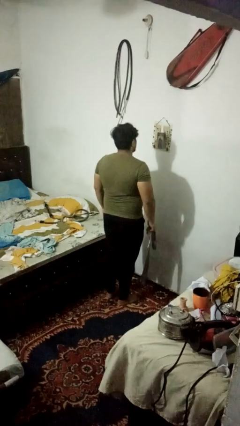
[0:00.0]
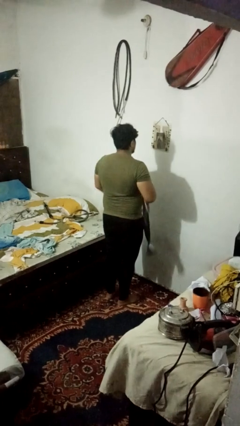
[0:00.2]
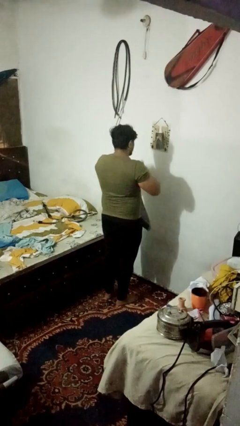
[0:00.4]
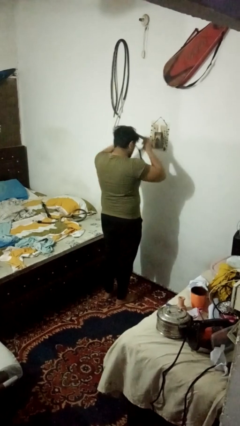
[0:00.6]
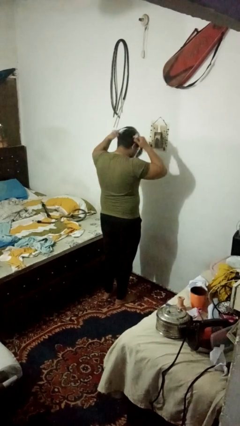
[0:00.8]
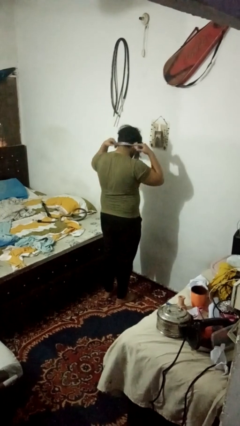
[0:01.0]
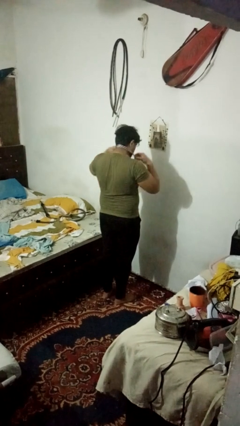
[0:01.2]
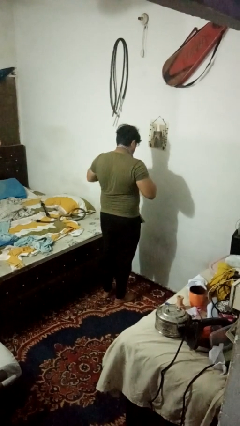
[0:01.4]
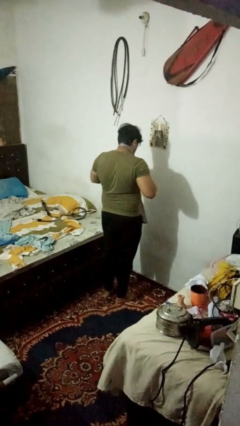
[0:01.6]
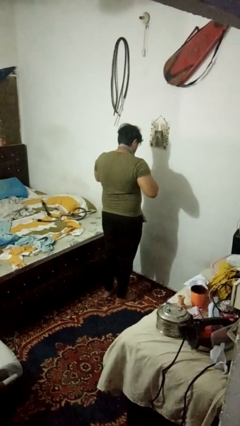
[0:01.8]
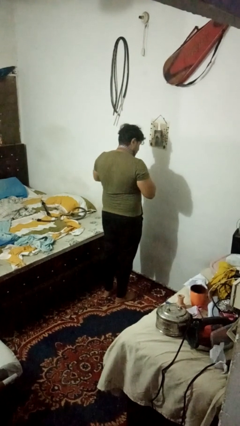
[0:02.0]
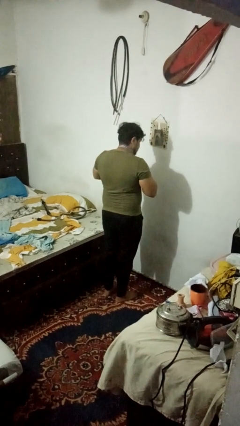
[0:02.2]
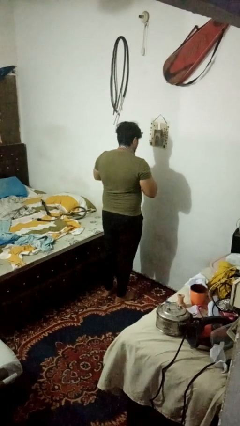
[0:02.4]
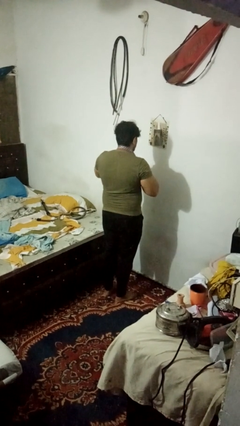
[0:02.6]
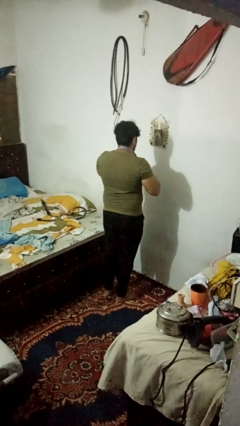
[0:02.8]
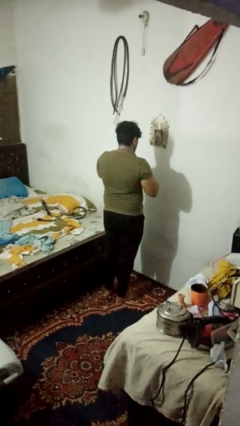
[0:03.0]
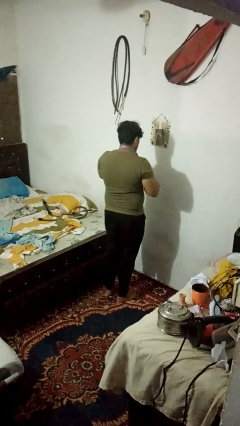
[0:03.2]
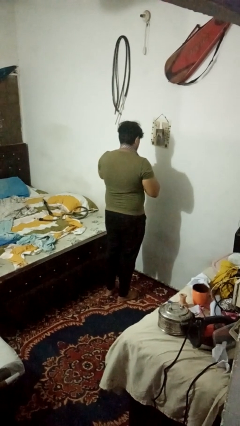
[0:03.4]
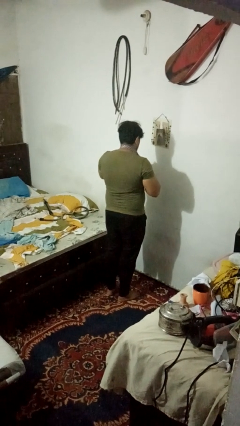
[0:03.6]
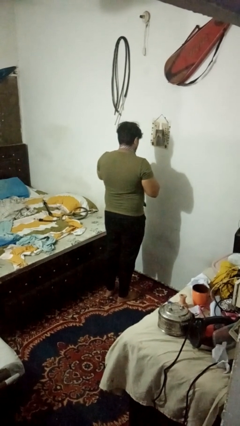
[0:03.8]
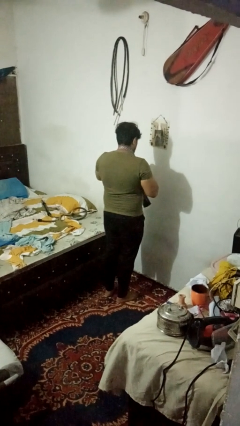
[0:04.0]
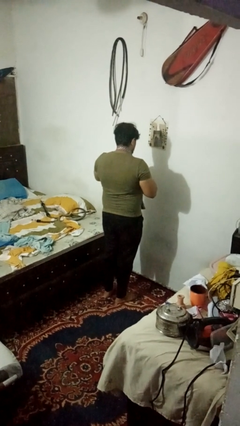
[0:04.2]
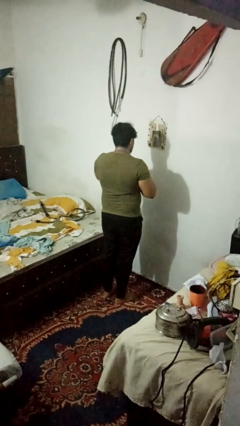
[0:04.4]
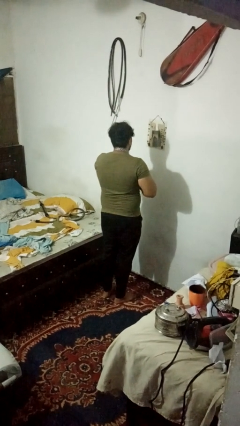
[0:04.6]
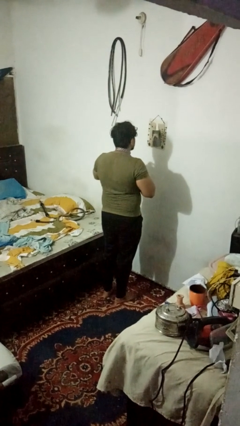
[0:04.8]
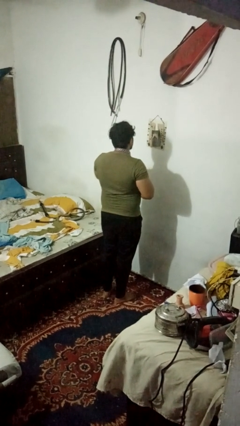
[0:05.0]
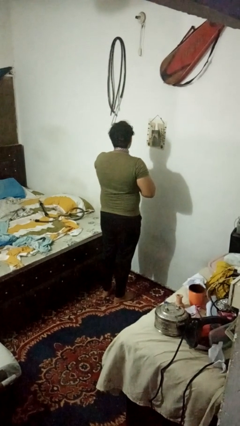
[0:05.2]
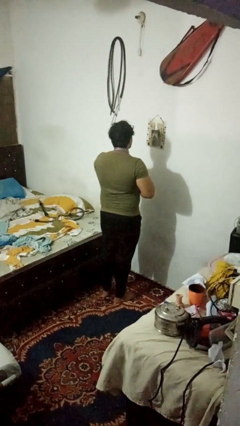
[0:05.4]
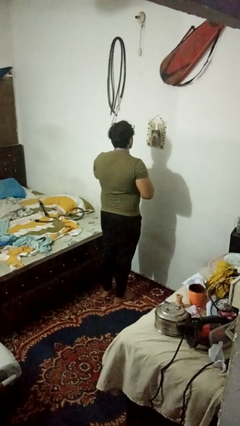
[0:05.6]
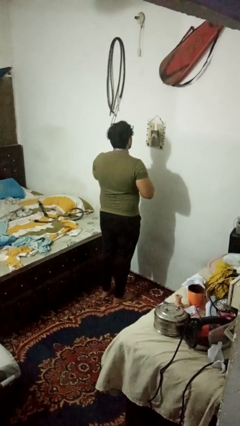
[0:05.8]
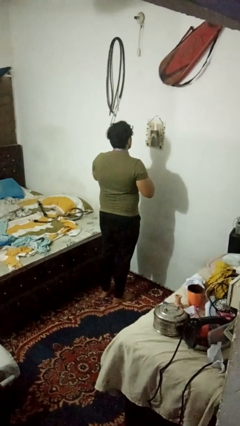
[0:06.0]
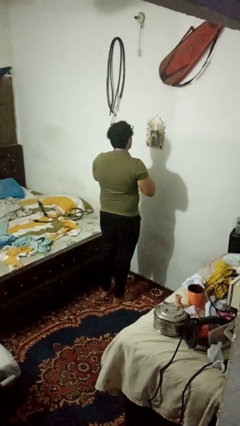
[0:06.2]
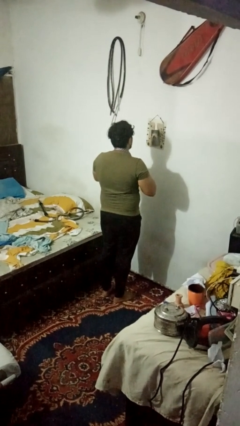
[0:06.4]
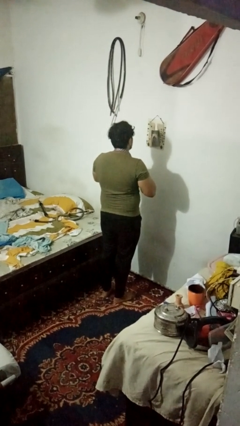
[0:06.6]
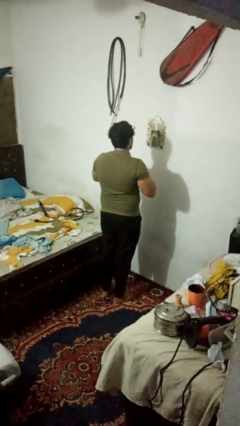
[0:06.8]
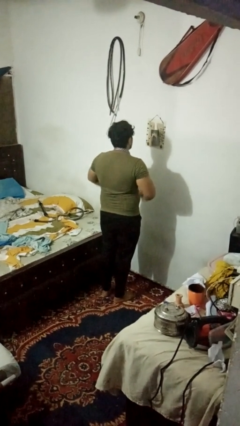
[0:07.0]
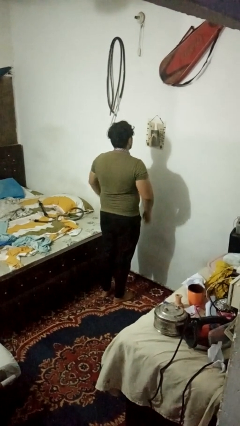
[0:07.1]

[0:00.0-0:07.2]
person puts on necktie

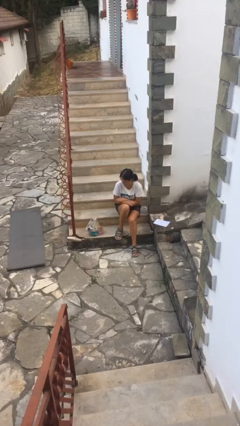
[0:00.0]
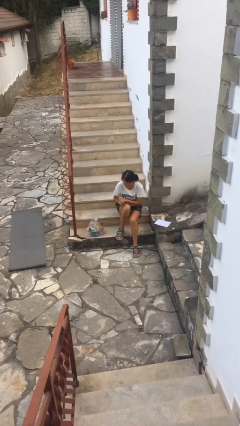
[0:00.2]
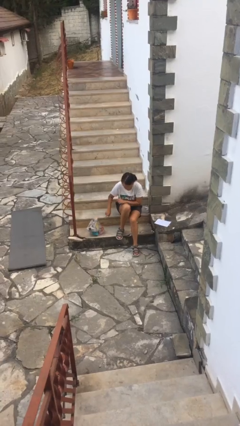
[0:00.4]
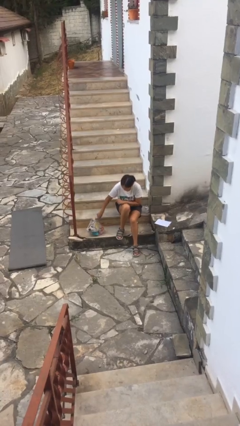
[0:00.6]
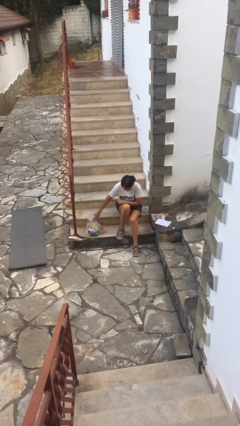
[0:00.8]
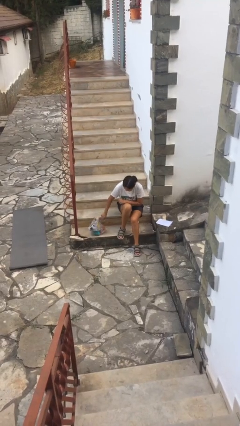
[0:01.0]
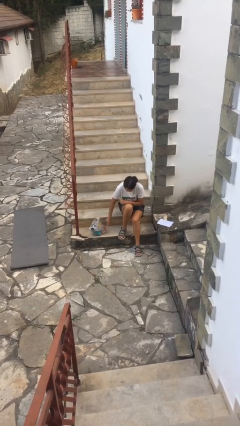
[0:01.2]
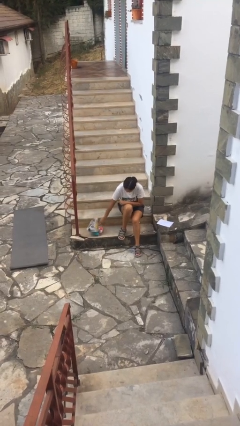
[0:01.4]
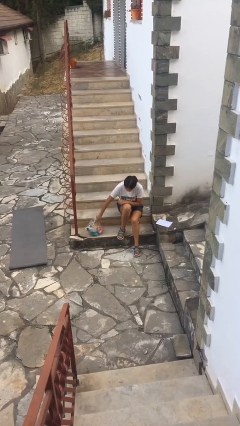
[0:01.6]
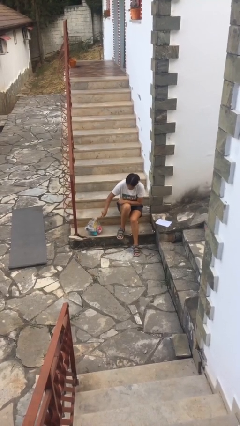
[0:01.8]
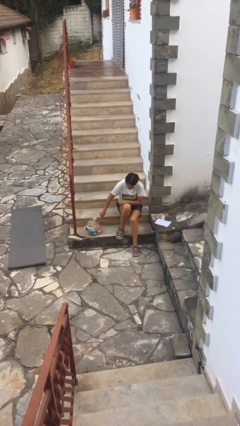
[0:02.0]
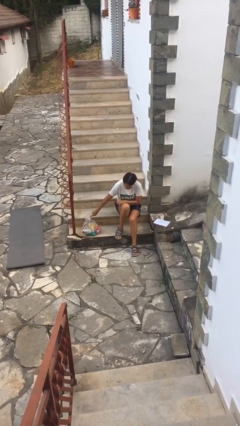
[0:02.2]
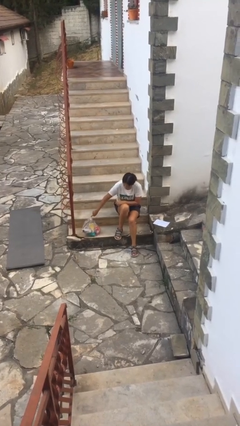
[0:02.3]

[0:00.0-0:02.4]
person taps object with finger

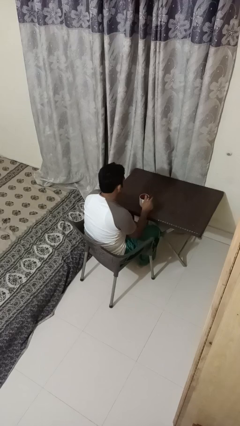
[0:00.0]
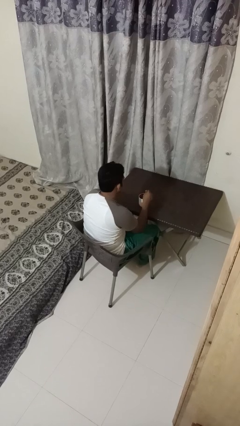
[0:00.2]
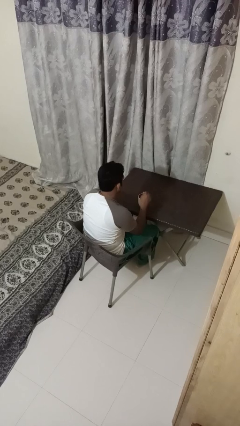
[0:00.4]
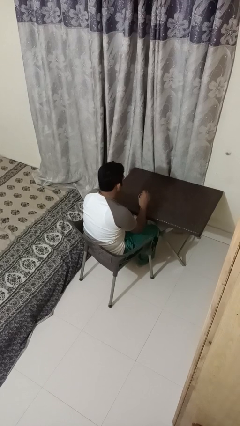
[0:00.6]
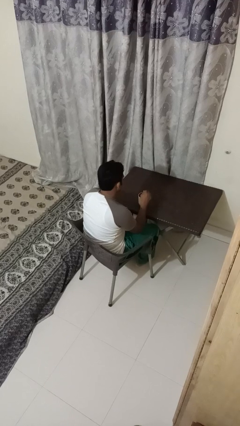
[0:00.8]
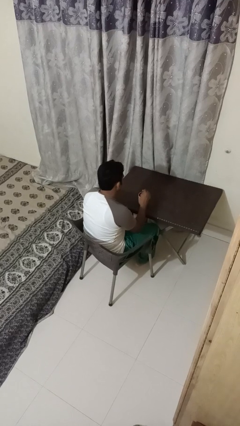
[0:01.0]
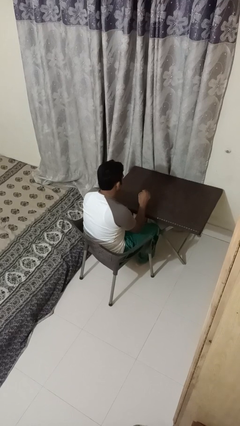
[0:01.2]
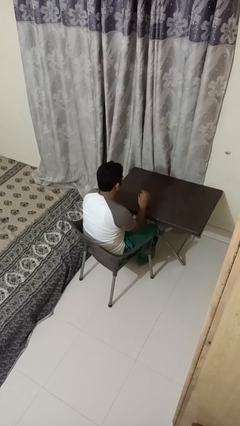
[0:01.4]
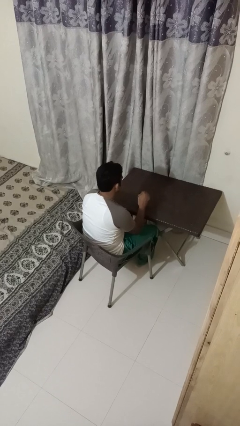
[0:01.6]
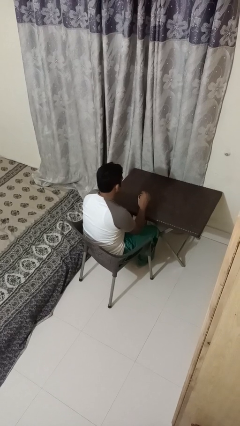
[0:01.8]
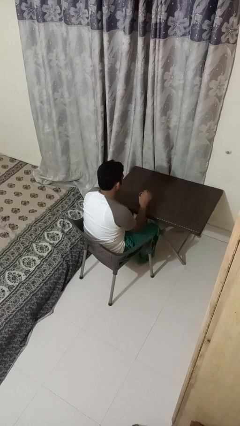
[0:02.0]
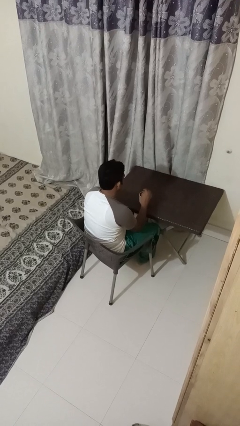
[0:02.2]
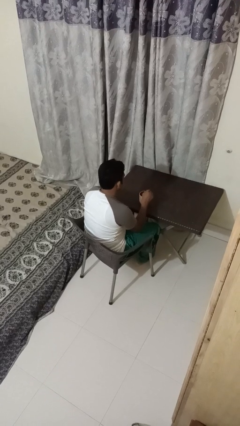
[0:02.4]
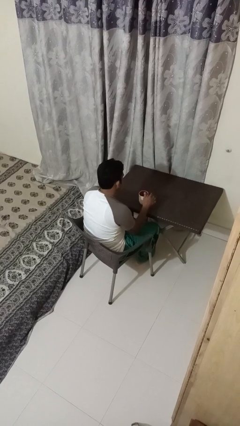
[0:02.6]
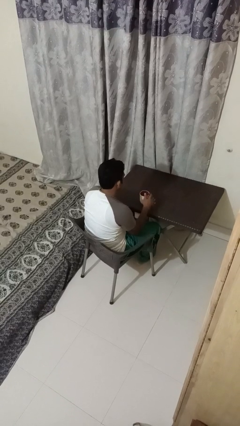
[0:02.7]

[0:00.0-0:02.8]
person stirs mug

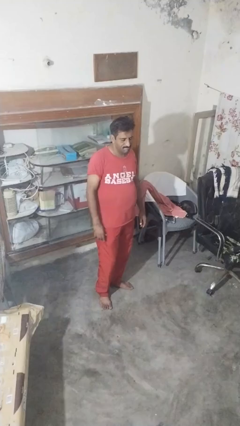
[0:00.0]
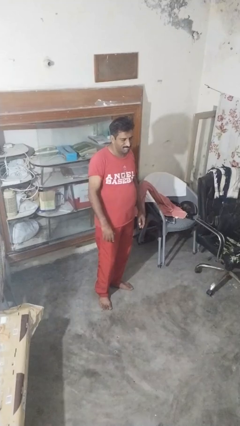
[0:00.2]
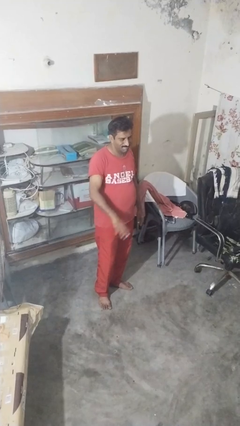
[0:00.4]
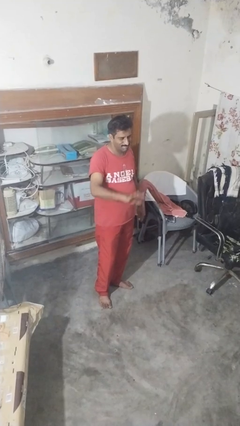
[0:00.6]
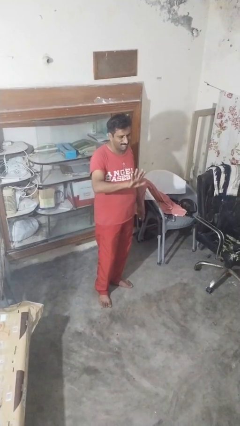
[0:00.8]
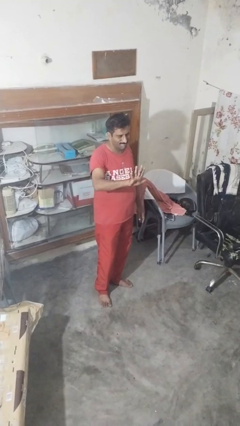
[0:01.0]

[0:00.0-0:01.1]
person gestures number five

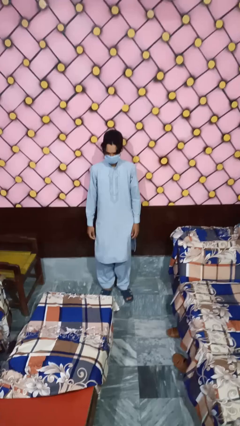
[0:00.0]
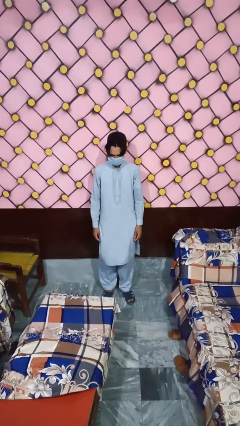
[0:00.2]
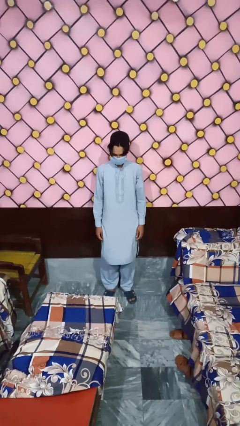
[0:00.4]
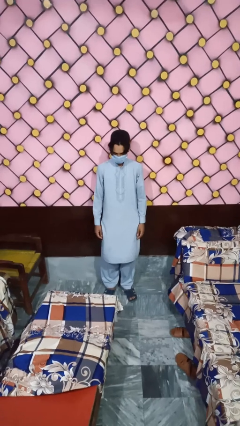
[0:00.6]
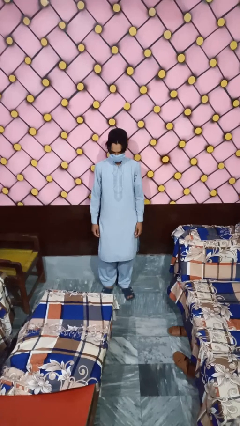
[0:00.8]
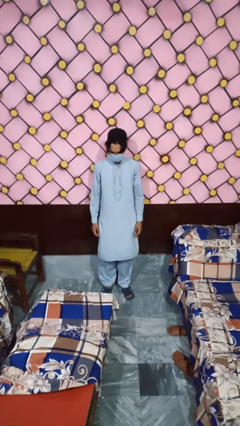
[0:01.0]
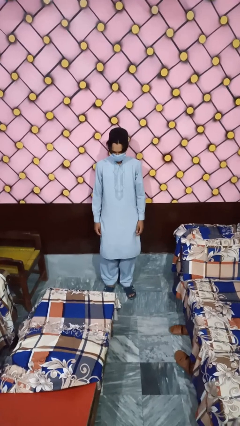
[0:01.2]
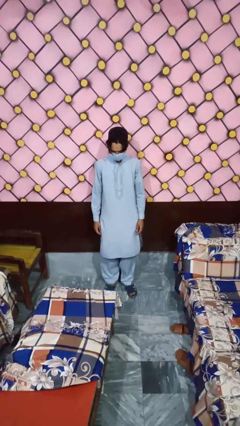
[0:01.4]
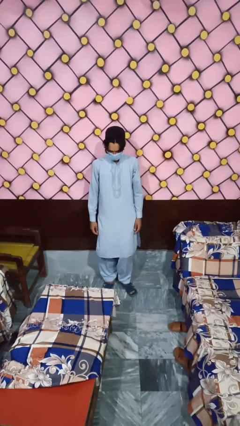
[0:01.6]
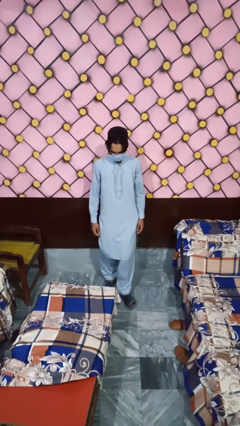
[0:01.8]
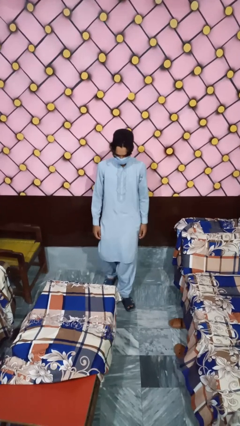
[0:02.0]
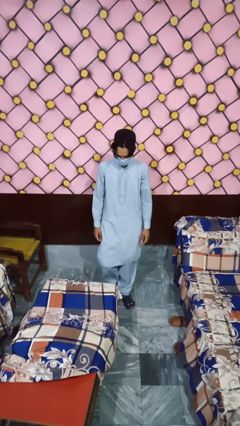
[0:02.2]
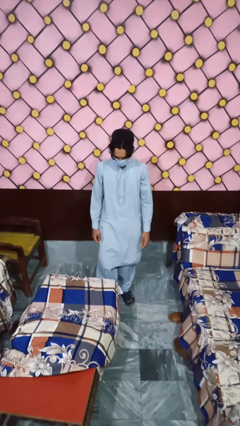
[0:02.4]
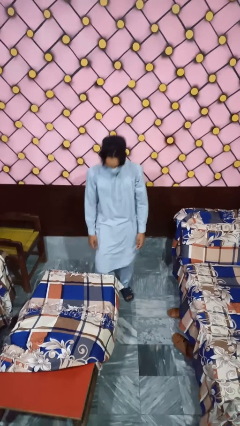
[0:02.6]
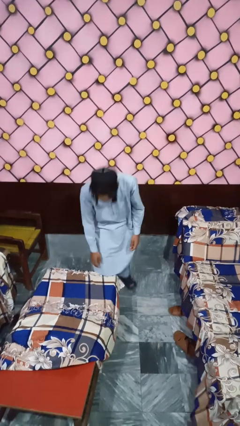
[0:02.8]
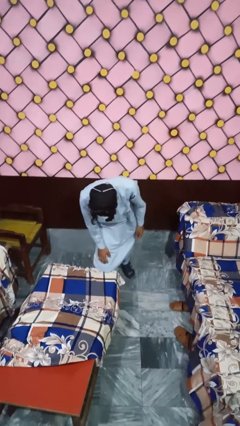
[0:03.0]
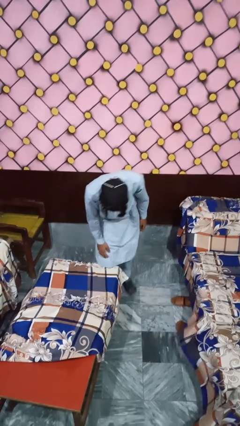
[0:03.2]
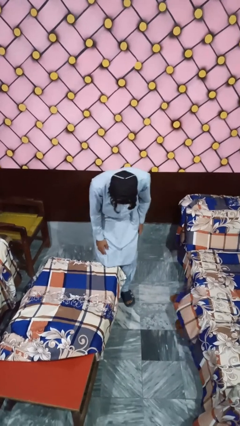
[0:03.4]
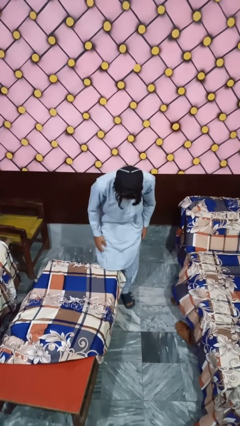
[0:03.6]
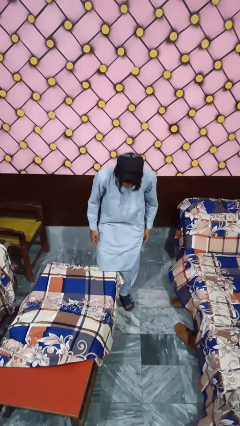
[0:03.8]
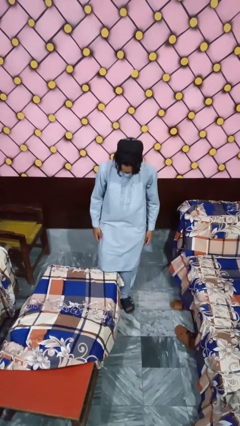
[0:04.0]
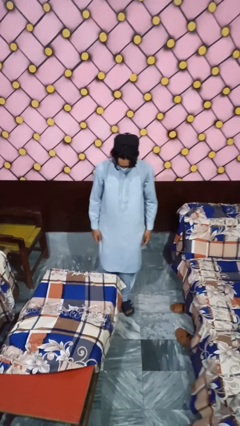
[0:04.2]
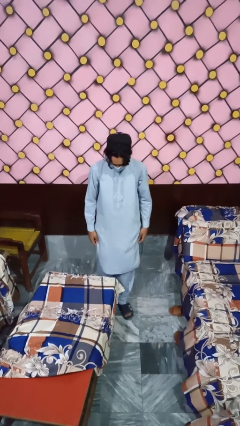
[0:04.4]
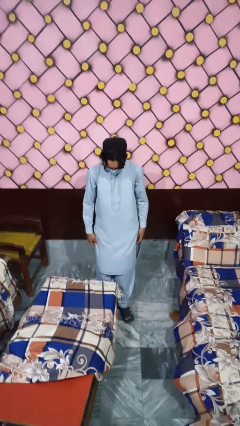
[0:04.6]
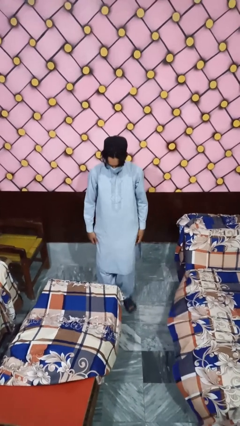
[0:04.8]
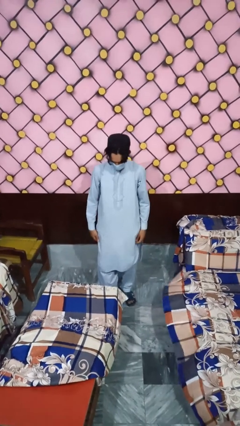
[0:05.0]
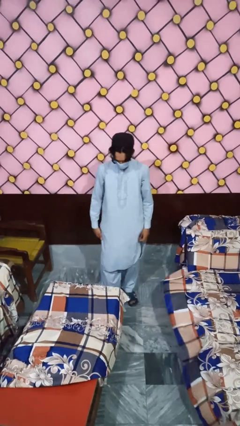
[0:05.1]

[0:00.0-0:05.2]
person bumps into table
